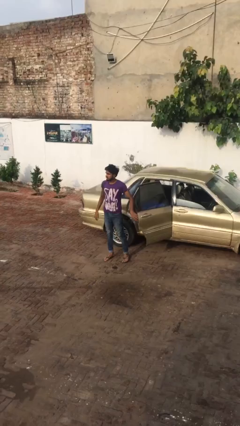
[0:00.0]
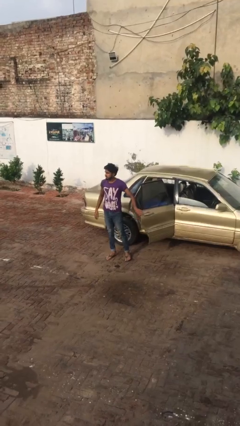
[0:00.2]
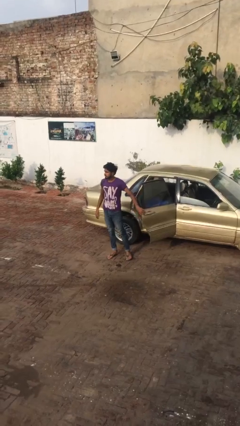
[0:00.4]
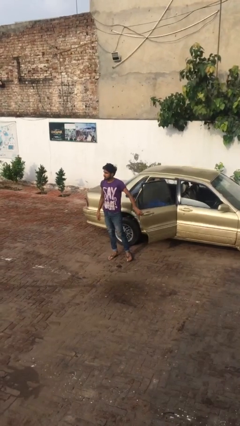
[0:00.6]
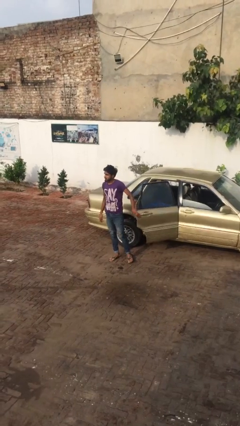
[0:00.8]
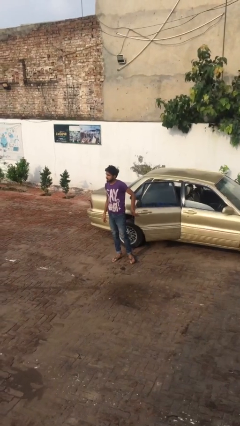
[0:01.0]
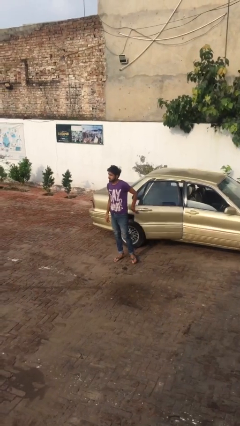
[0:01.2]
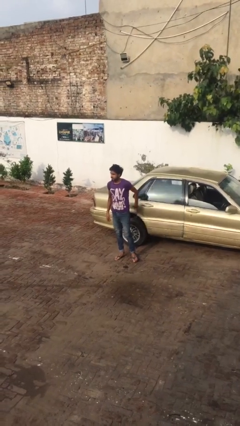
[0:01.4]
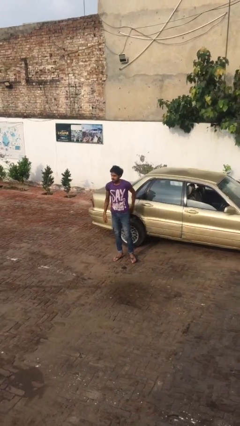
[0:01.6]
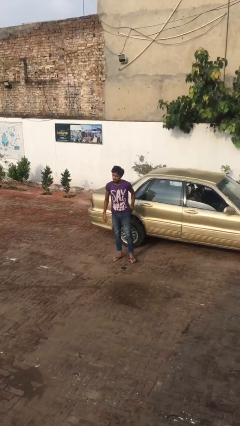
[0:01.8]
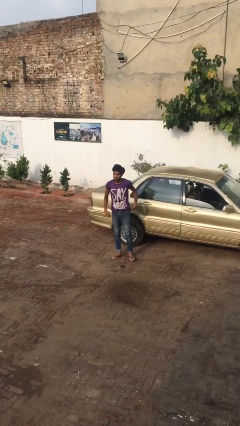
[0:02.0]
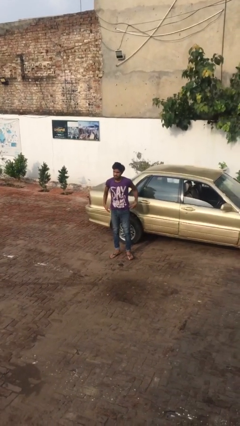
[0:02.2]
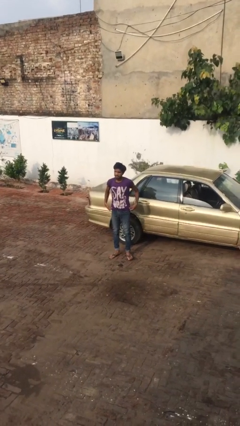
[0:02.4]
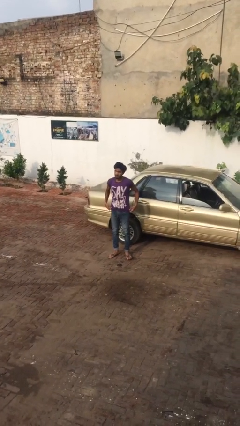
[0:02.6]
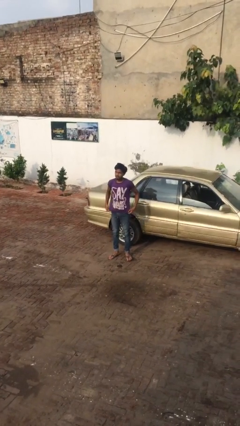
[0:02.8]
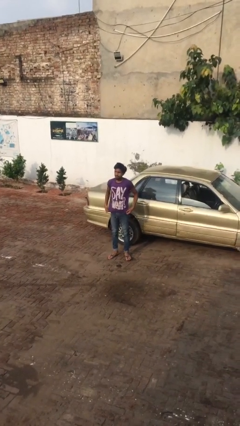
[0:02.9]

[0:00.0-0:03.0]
person closes car door

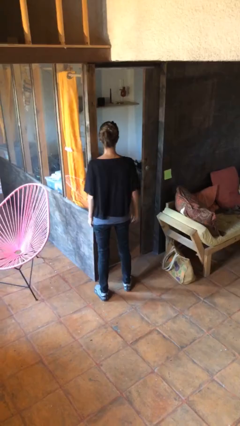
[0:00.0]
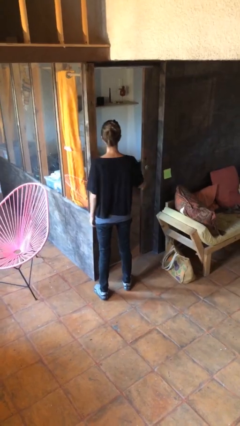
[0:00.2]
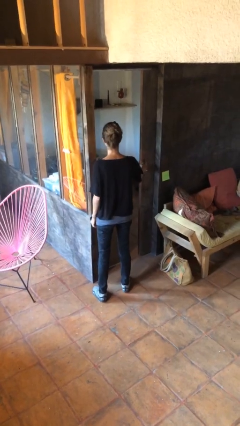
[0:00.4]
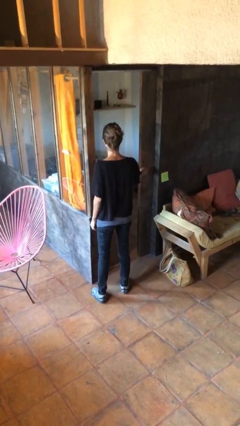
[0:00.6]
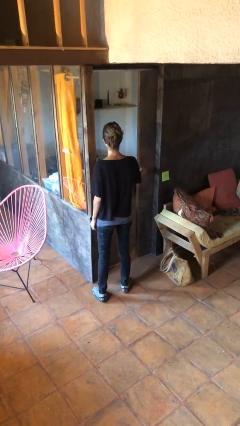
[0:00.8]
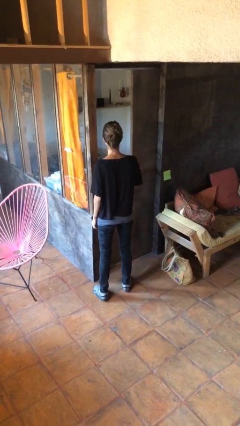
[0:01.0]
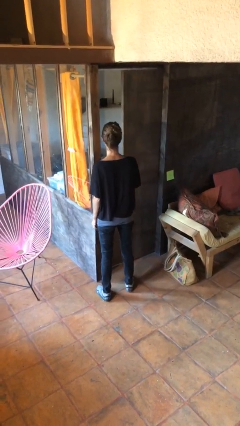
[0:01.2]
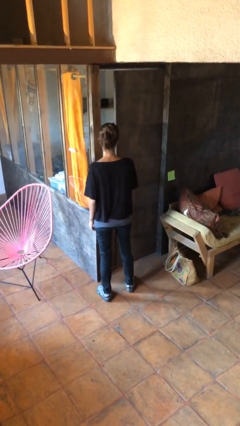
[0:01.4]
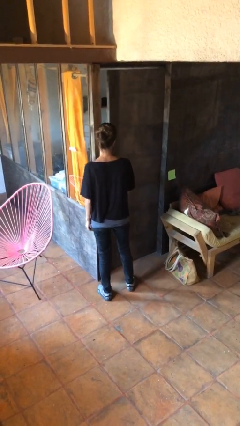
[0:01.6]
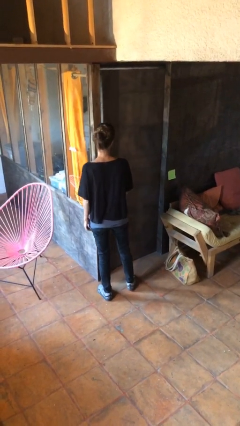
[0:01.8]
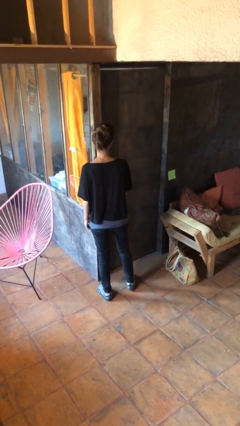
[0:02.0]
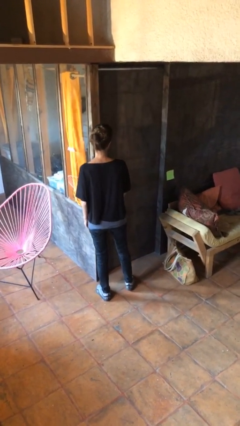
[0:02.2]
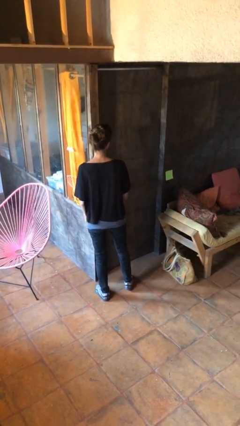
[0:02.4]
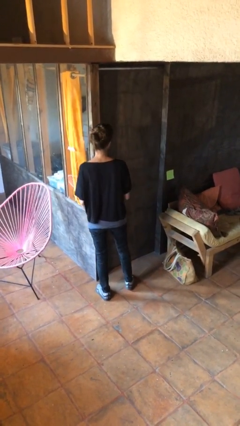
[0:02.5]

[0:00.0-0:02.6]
person closes sliding door

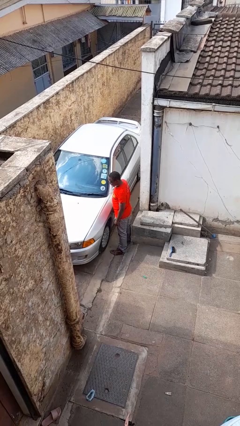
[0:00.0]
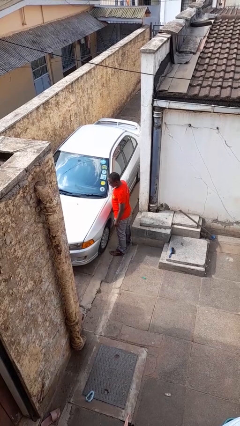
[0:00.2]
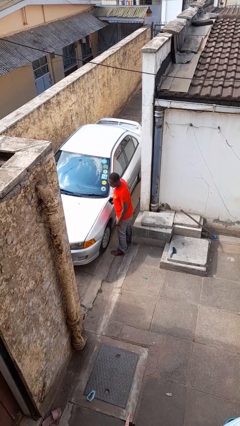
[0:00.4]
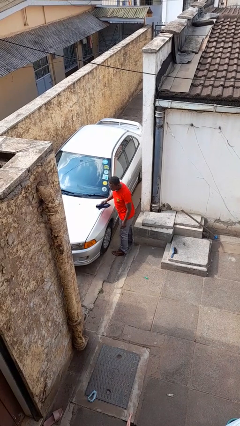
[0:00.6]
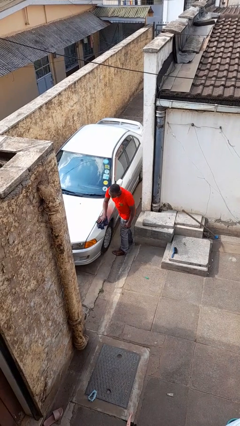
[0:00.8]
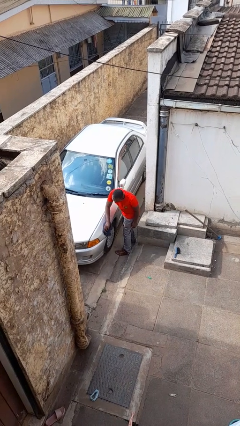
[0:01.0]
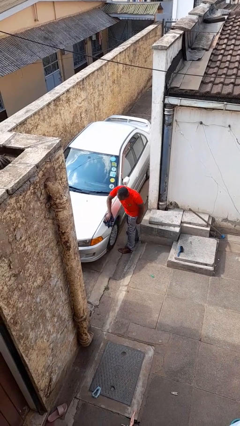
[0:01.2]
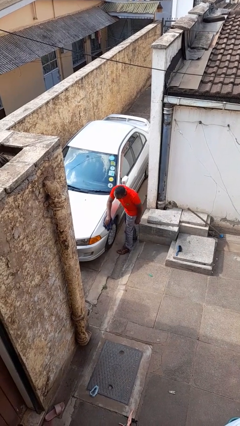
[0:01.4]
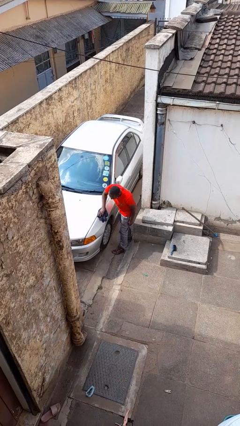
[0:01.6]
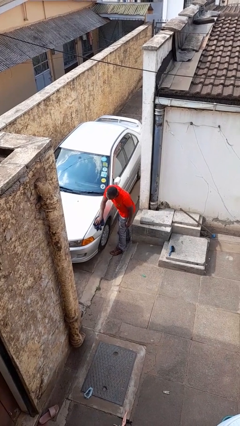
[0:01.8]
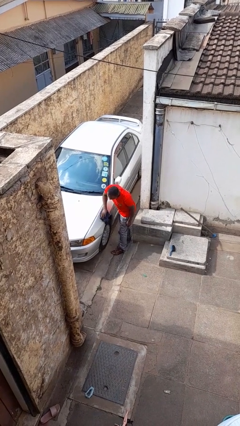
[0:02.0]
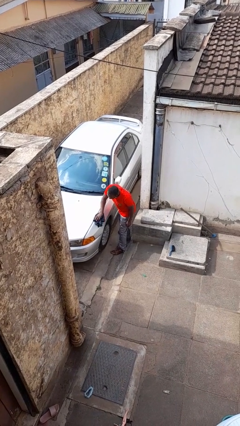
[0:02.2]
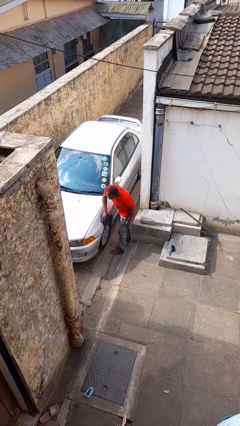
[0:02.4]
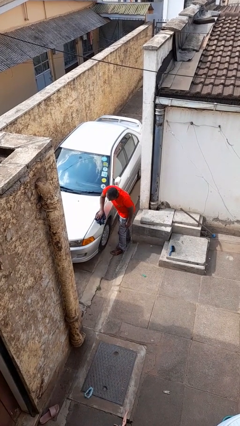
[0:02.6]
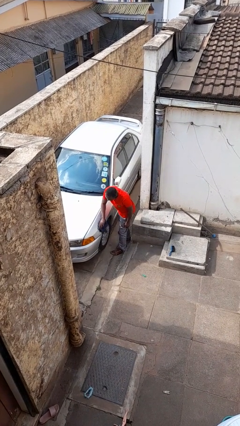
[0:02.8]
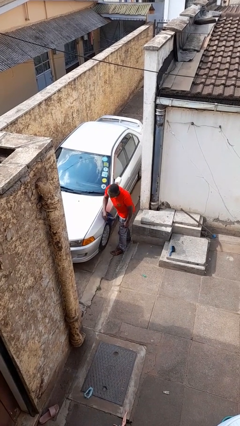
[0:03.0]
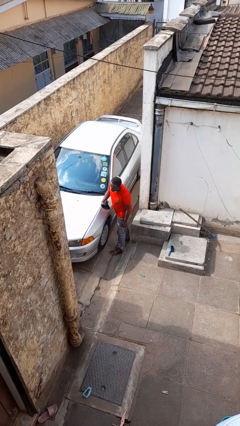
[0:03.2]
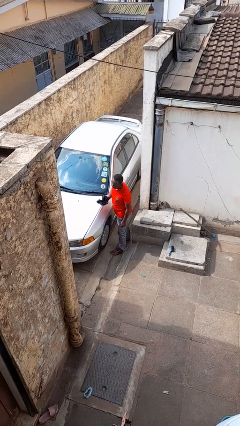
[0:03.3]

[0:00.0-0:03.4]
person polishes car with rag

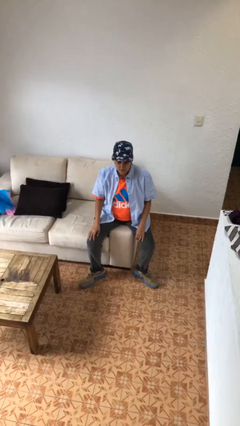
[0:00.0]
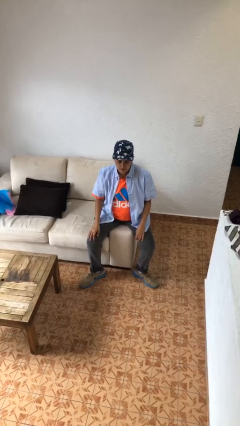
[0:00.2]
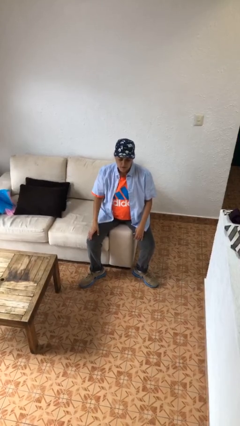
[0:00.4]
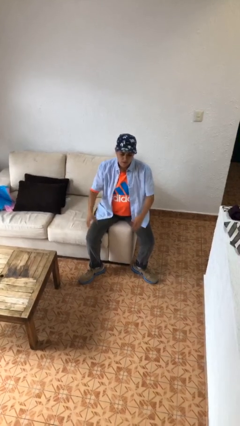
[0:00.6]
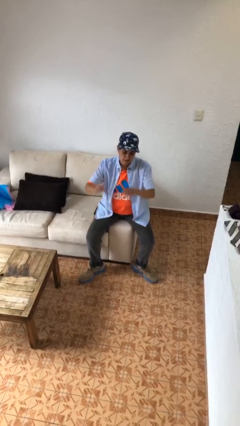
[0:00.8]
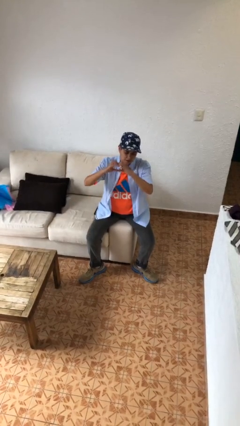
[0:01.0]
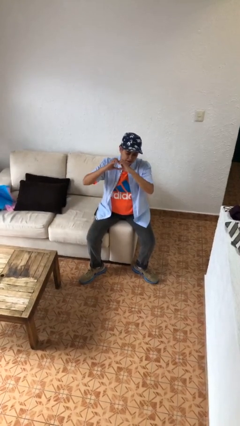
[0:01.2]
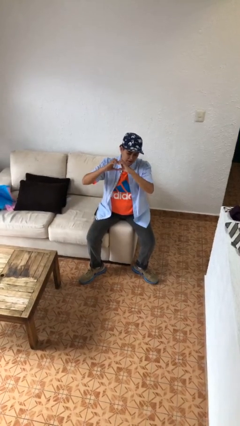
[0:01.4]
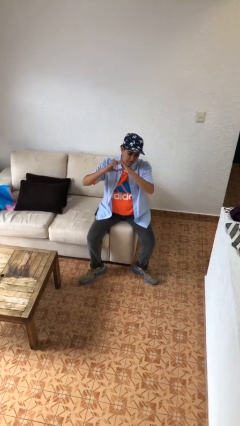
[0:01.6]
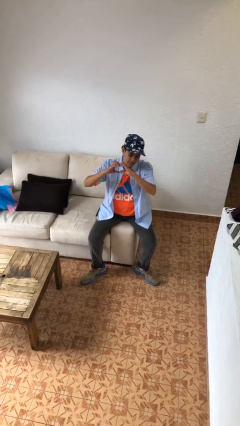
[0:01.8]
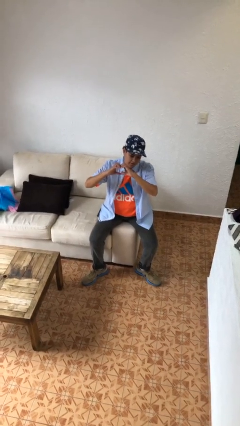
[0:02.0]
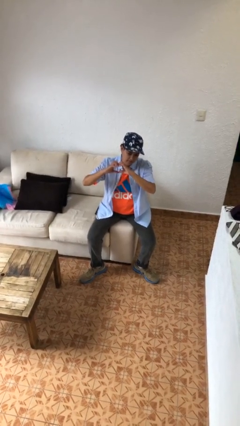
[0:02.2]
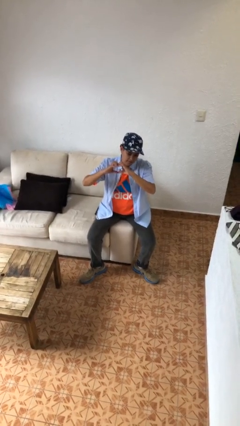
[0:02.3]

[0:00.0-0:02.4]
person gestures heart

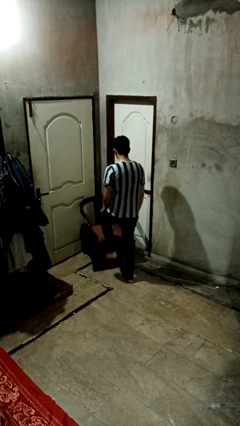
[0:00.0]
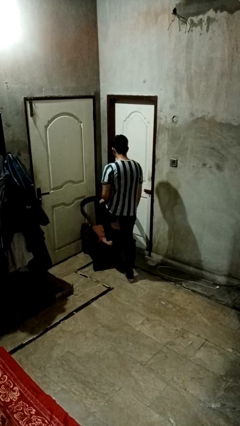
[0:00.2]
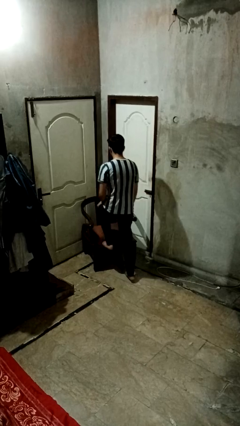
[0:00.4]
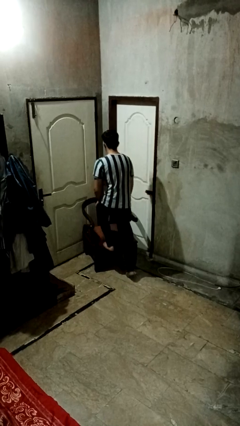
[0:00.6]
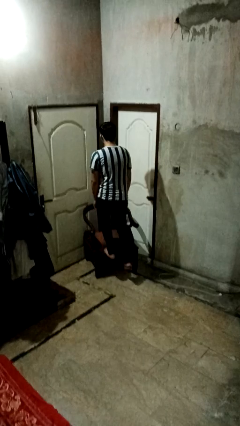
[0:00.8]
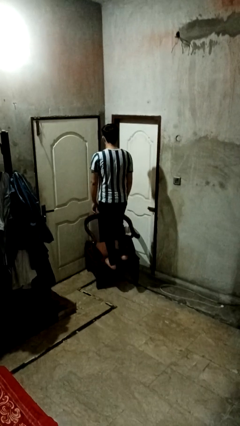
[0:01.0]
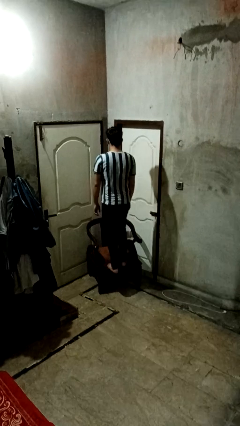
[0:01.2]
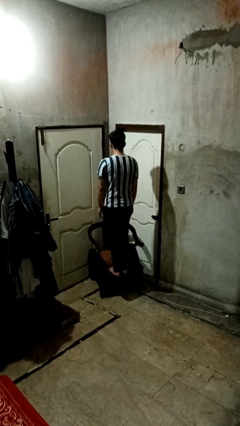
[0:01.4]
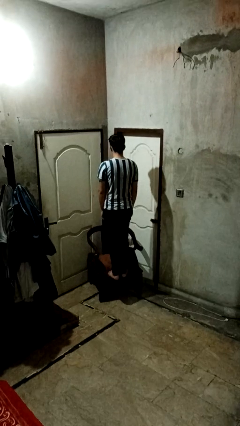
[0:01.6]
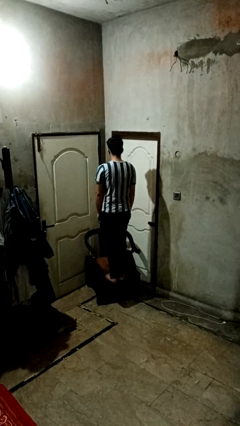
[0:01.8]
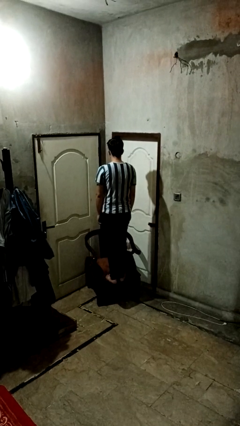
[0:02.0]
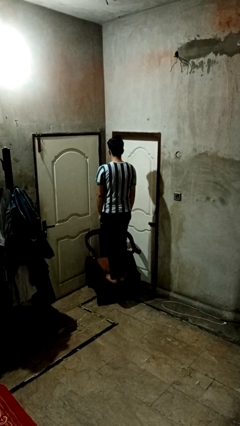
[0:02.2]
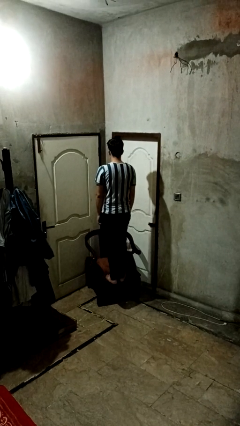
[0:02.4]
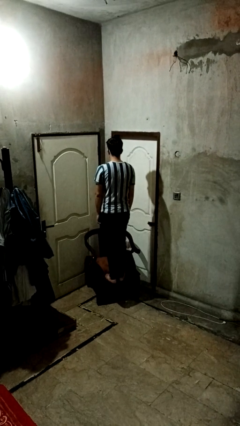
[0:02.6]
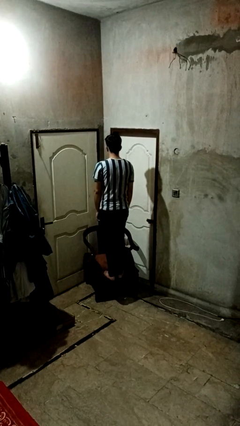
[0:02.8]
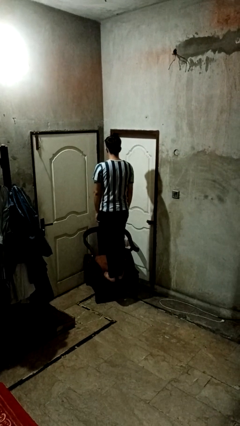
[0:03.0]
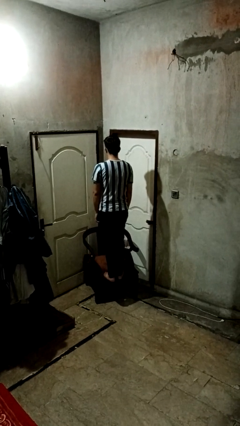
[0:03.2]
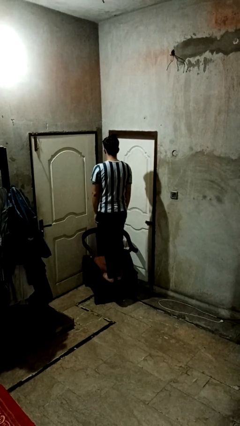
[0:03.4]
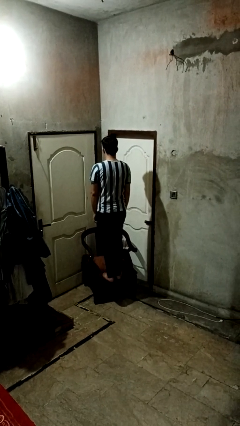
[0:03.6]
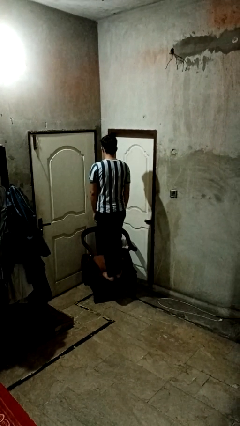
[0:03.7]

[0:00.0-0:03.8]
person climbs on couch

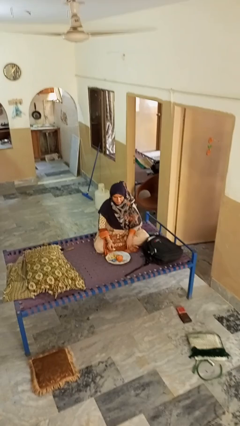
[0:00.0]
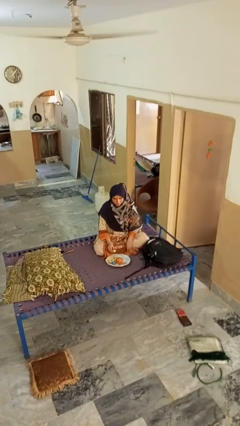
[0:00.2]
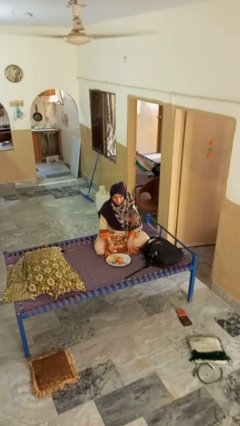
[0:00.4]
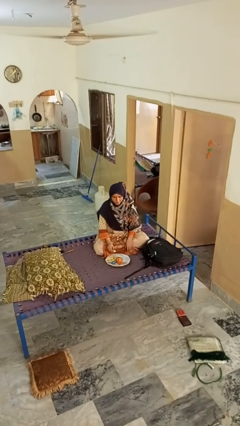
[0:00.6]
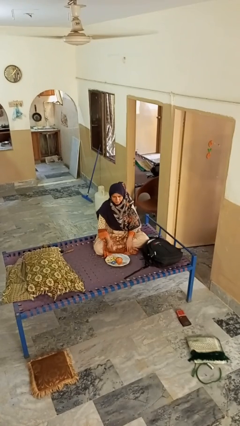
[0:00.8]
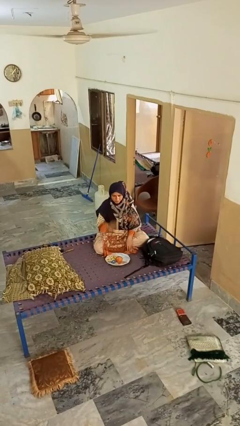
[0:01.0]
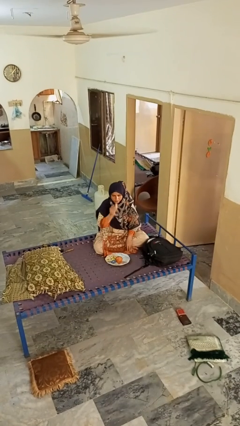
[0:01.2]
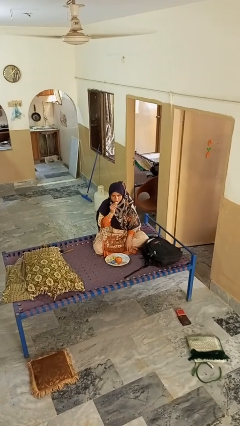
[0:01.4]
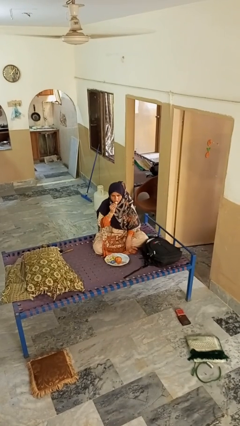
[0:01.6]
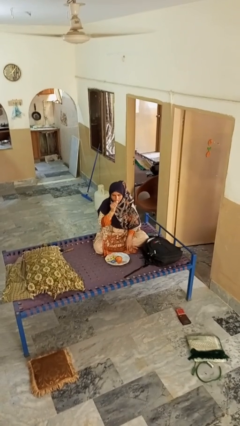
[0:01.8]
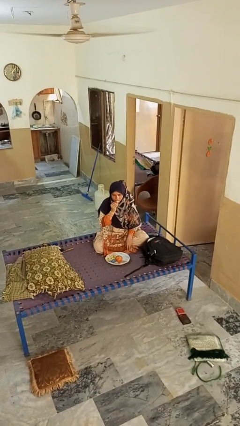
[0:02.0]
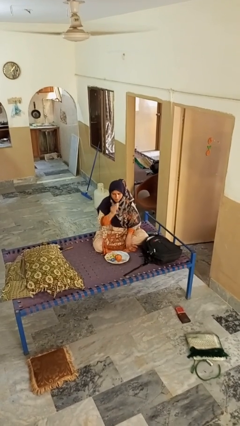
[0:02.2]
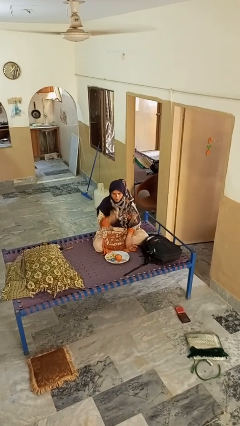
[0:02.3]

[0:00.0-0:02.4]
person eats apple
